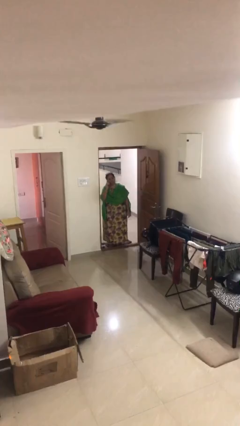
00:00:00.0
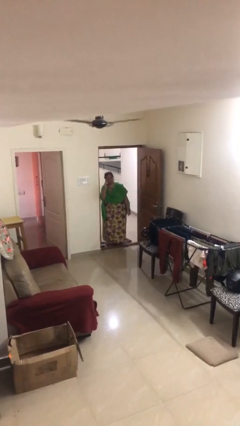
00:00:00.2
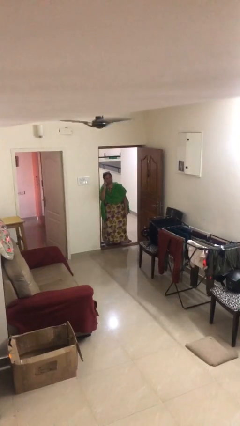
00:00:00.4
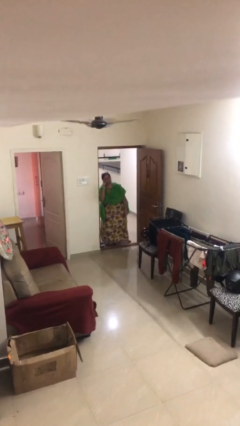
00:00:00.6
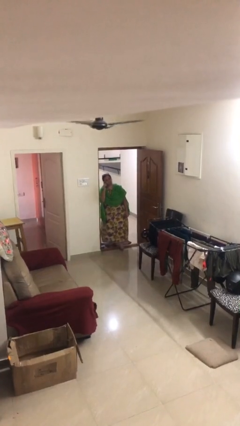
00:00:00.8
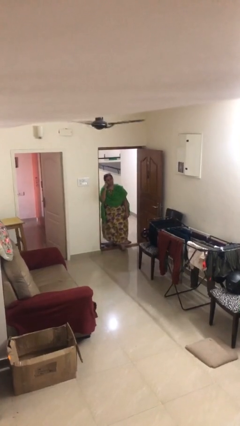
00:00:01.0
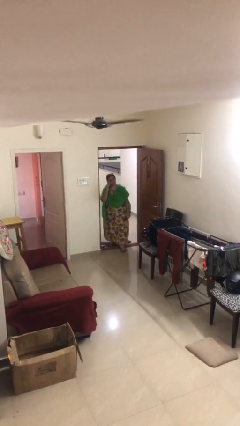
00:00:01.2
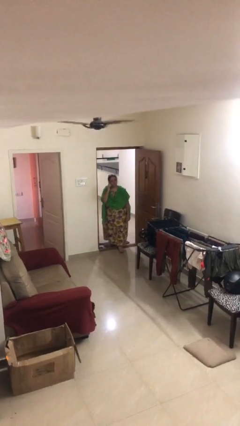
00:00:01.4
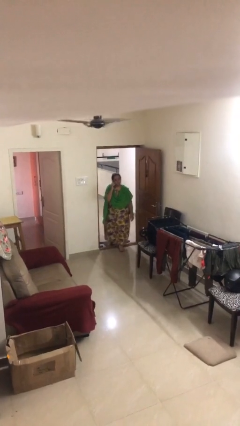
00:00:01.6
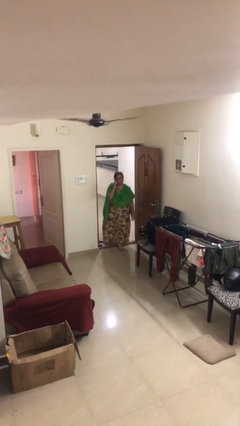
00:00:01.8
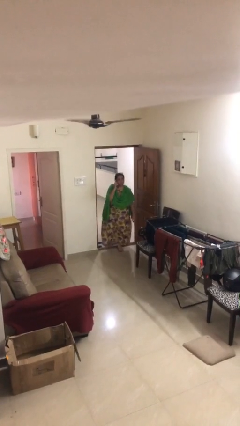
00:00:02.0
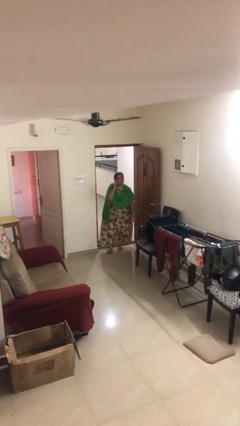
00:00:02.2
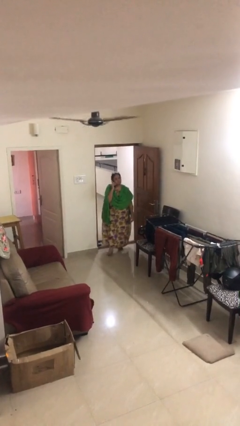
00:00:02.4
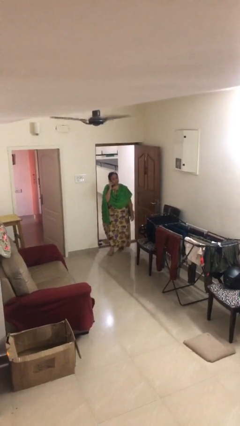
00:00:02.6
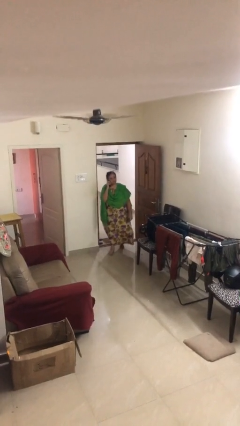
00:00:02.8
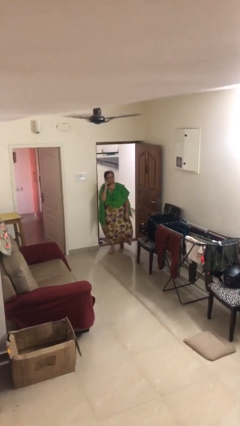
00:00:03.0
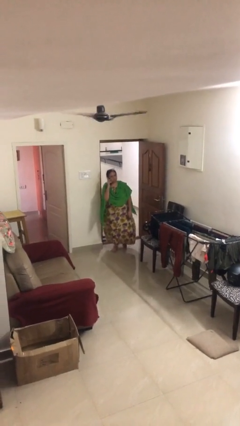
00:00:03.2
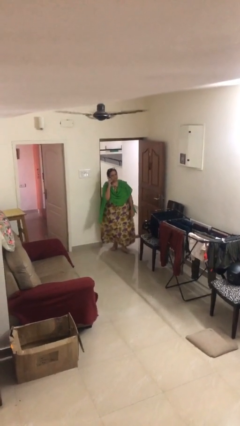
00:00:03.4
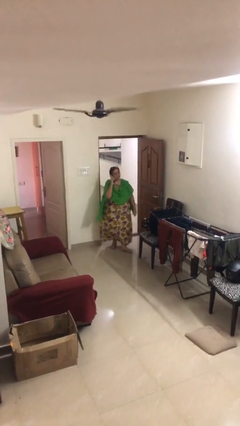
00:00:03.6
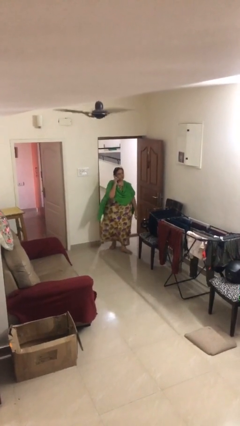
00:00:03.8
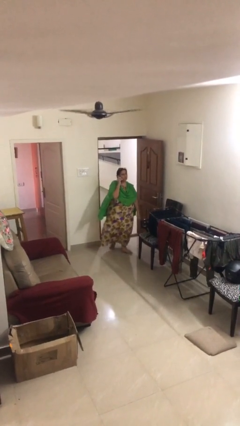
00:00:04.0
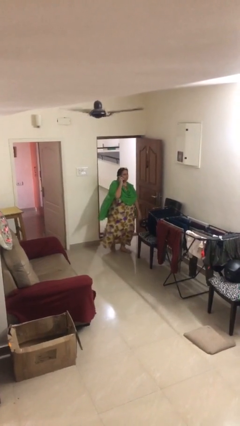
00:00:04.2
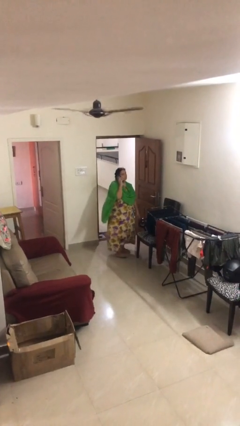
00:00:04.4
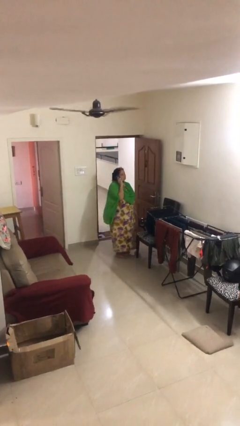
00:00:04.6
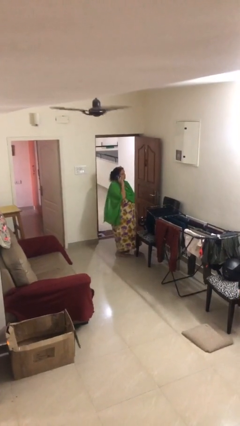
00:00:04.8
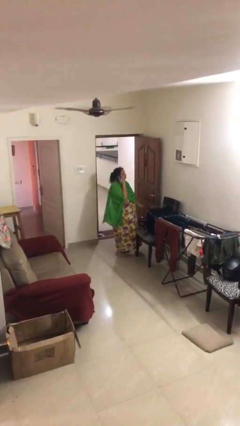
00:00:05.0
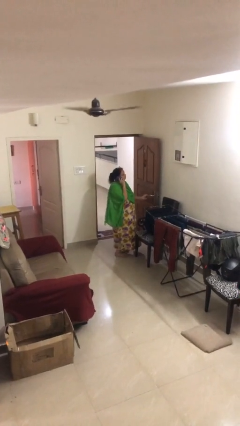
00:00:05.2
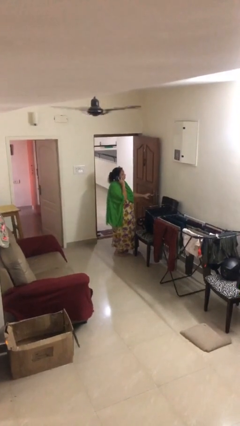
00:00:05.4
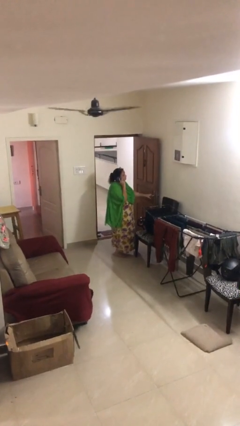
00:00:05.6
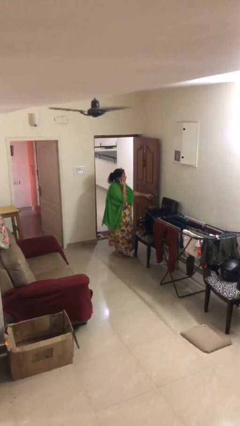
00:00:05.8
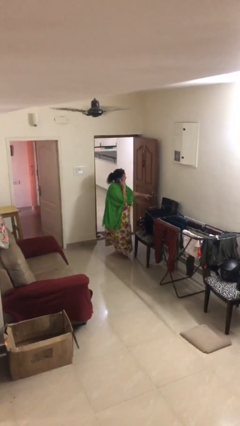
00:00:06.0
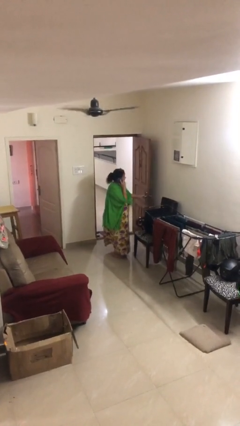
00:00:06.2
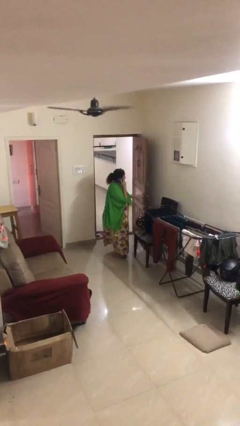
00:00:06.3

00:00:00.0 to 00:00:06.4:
person enters scene through structure

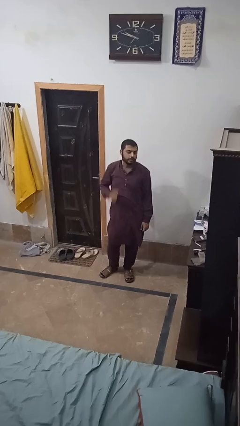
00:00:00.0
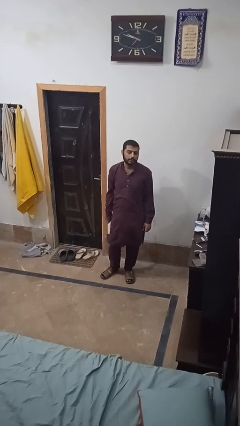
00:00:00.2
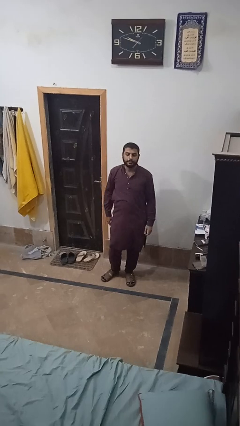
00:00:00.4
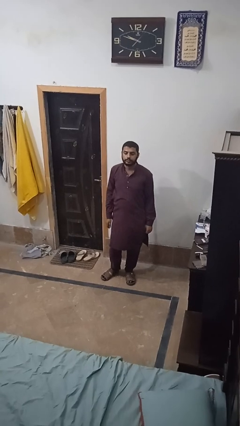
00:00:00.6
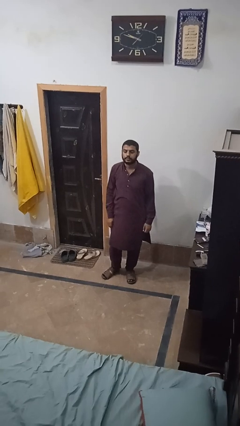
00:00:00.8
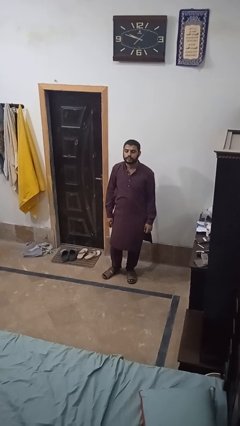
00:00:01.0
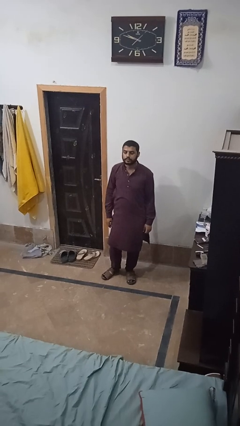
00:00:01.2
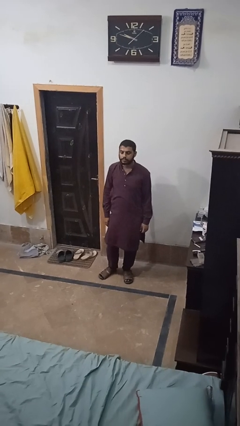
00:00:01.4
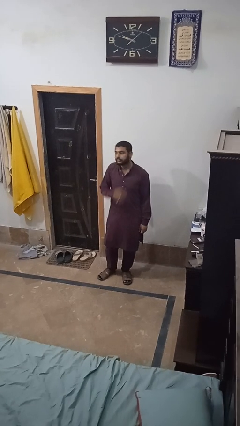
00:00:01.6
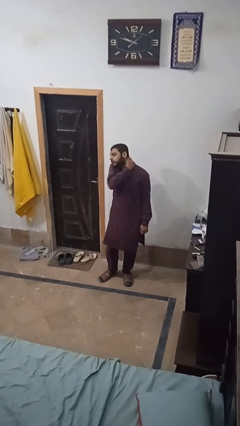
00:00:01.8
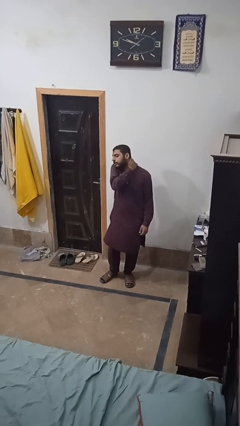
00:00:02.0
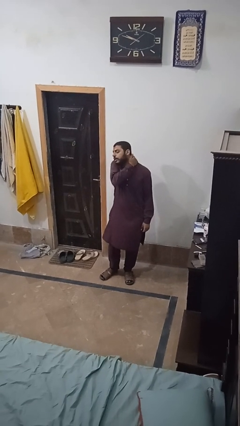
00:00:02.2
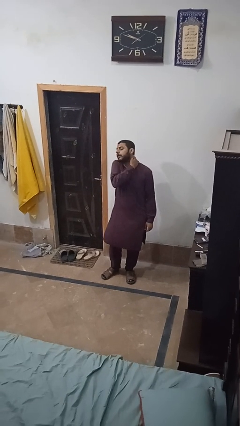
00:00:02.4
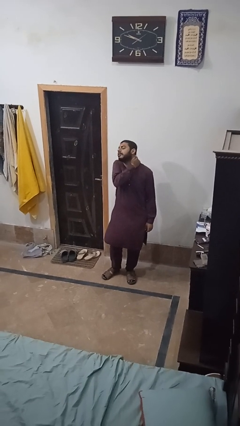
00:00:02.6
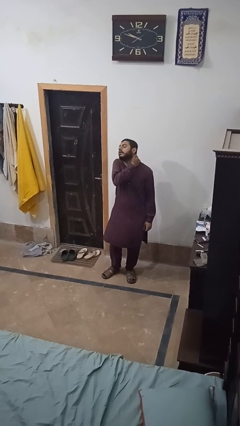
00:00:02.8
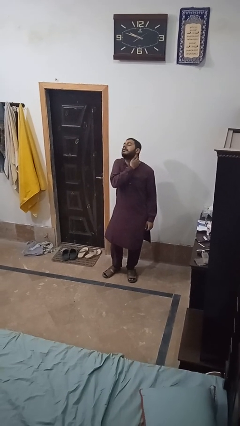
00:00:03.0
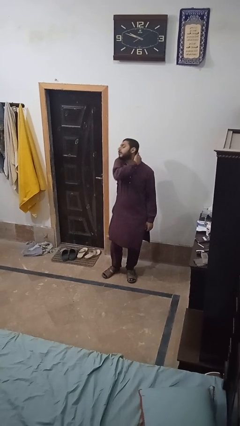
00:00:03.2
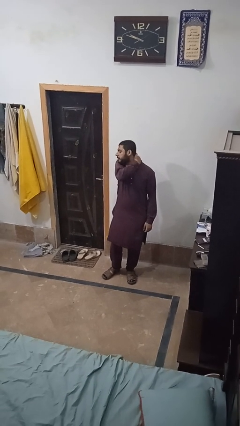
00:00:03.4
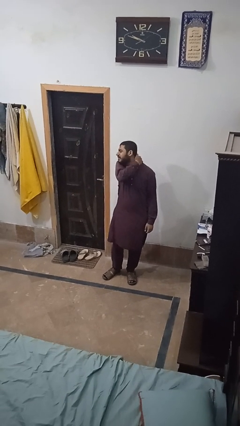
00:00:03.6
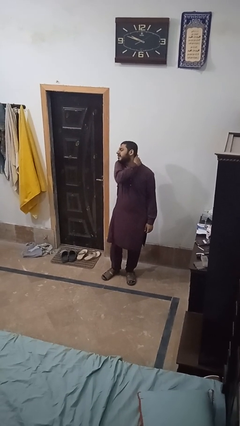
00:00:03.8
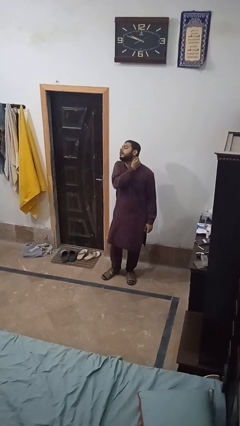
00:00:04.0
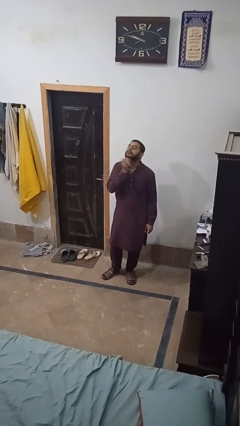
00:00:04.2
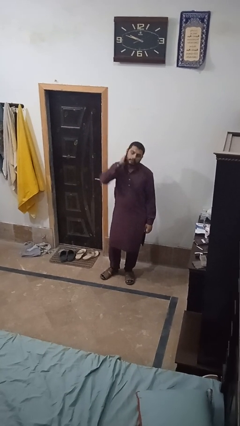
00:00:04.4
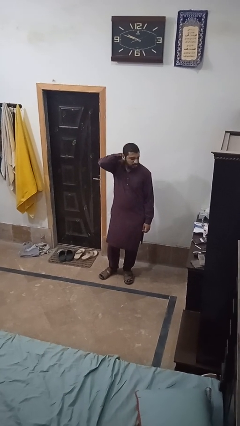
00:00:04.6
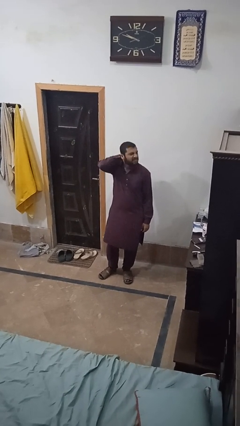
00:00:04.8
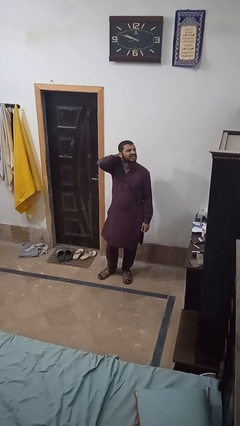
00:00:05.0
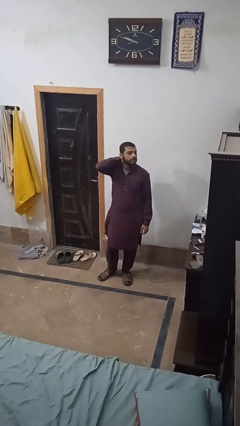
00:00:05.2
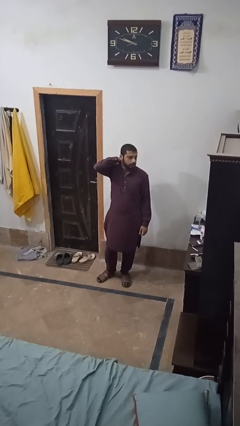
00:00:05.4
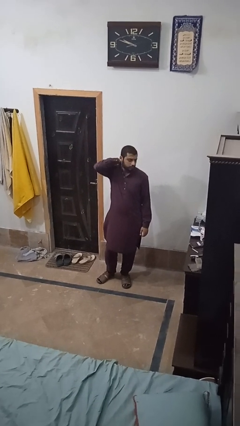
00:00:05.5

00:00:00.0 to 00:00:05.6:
person rubs neck

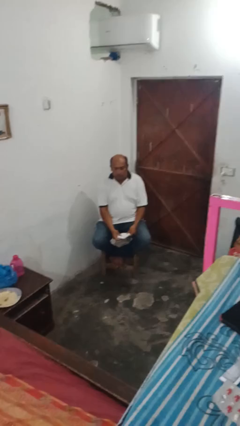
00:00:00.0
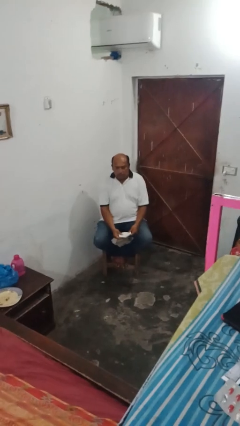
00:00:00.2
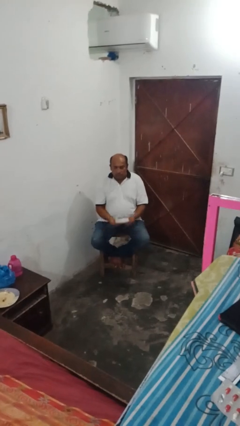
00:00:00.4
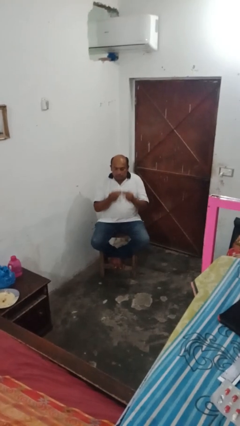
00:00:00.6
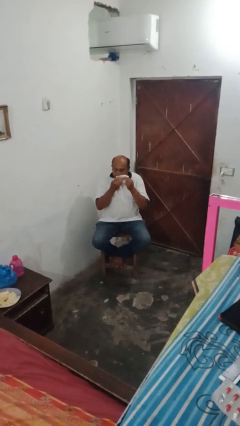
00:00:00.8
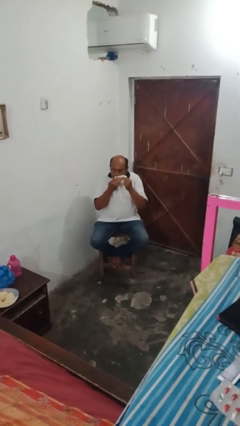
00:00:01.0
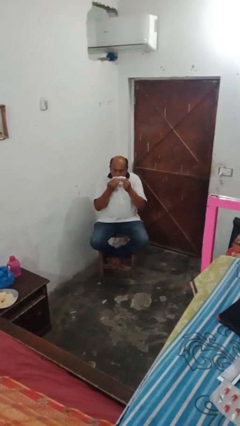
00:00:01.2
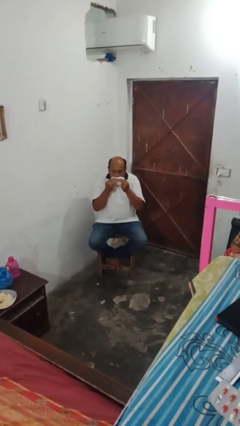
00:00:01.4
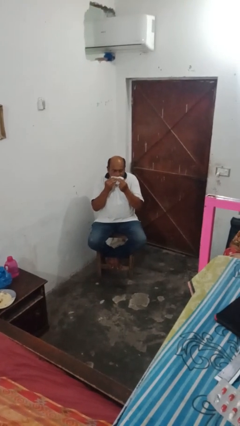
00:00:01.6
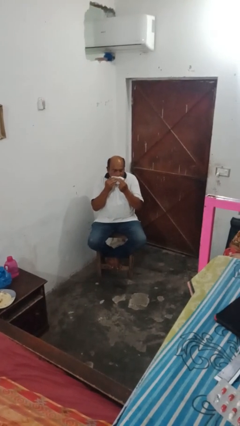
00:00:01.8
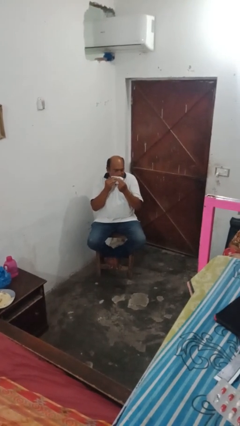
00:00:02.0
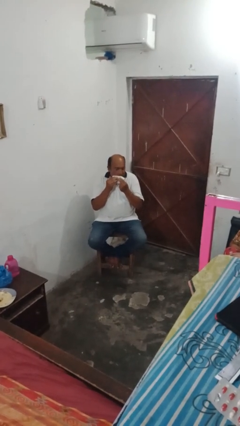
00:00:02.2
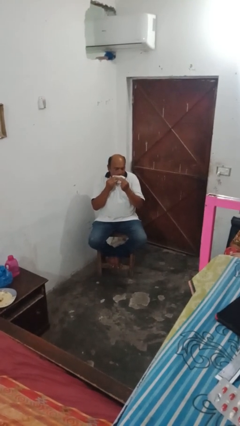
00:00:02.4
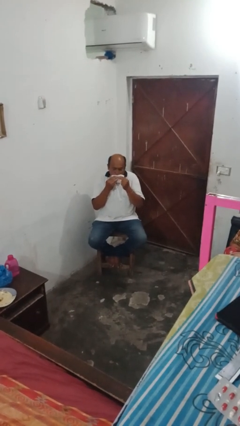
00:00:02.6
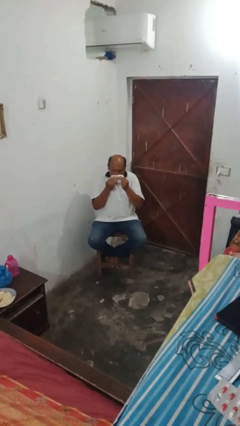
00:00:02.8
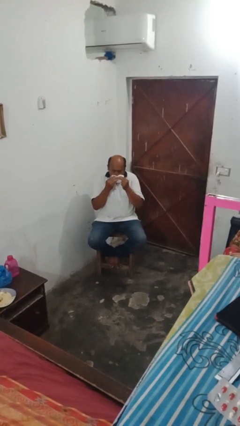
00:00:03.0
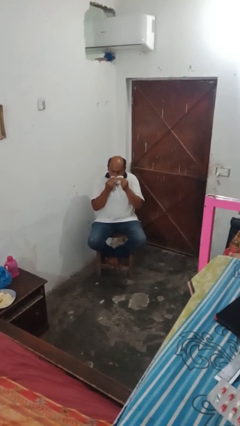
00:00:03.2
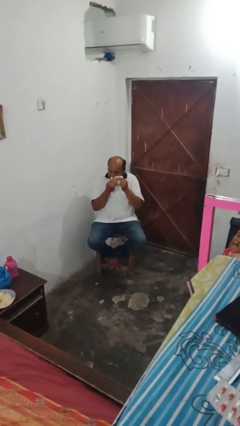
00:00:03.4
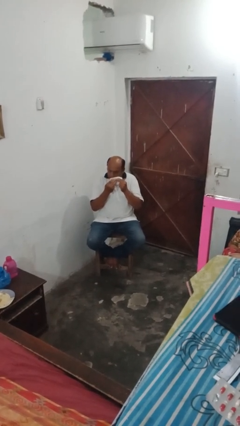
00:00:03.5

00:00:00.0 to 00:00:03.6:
person wipes mouth with napkin

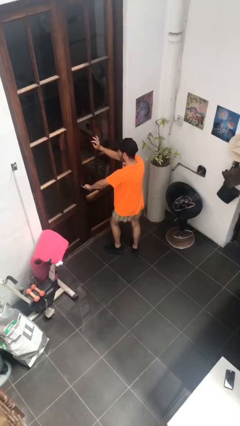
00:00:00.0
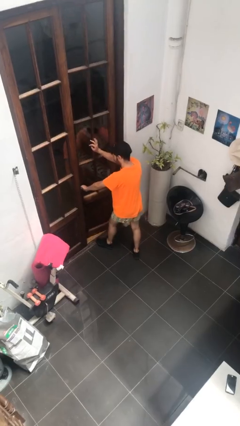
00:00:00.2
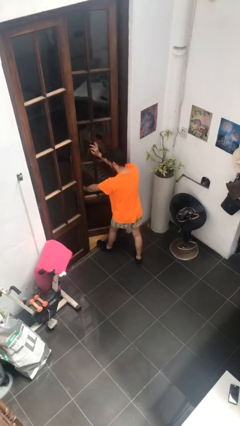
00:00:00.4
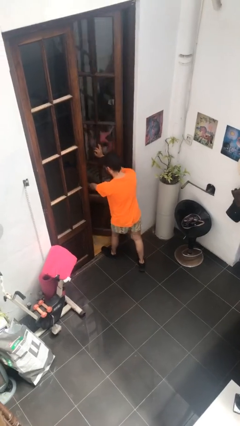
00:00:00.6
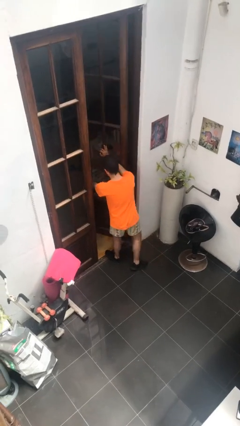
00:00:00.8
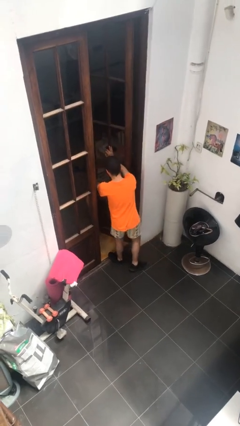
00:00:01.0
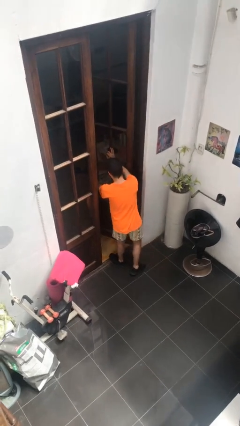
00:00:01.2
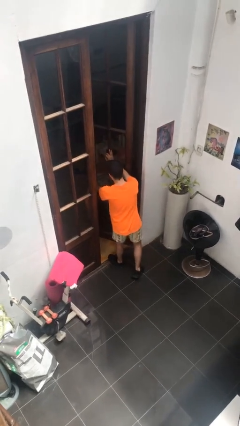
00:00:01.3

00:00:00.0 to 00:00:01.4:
person opens facility door

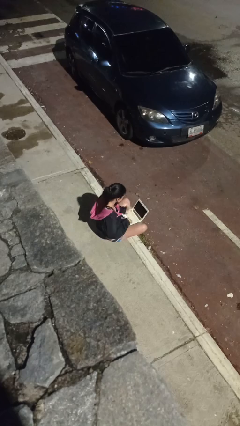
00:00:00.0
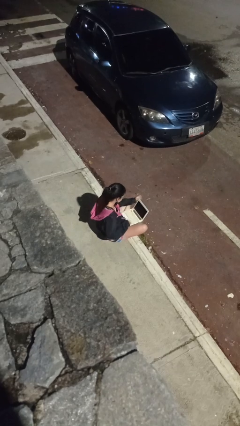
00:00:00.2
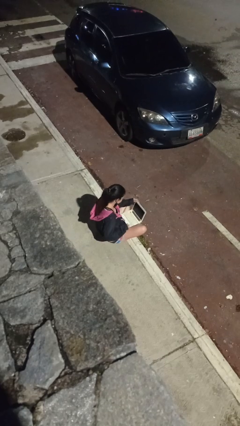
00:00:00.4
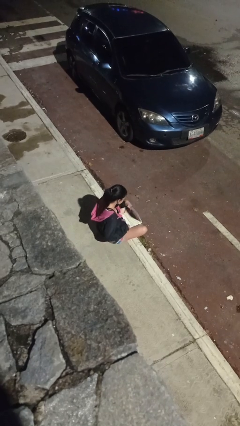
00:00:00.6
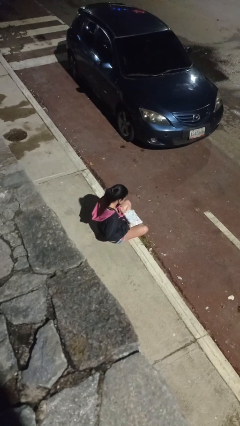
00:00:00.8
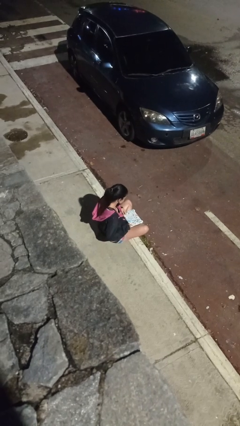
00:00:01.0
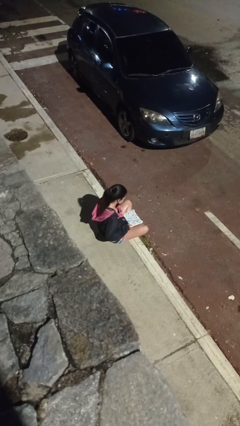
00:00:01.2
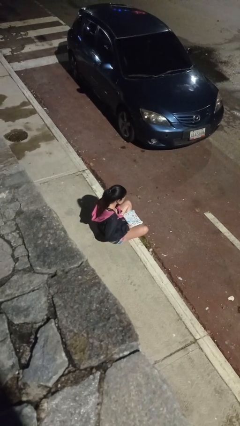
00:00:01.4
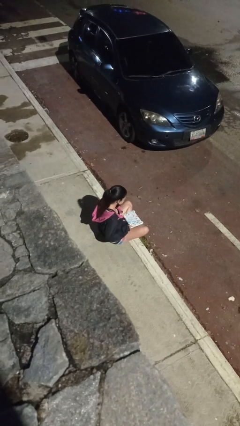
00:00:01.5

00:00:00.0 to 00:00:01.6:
person closes laptop
